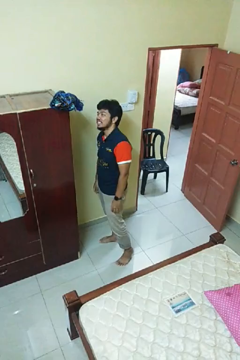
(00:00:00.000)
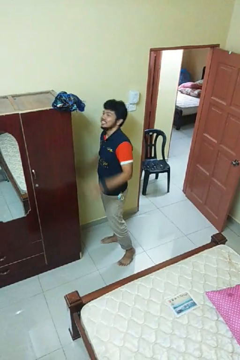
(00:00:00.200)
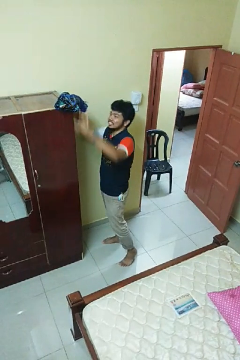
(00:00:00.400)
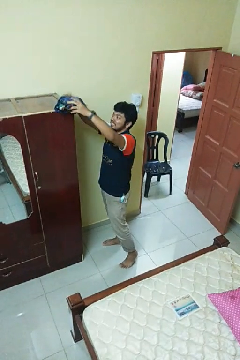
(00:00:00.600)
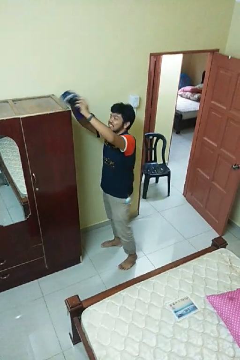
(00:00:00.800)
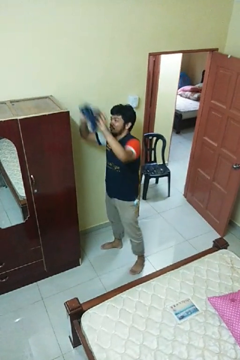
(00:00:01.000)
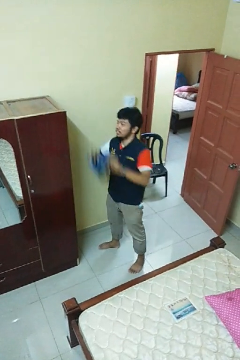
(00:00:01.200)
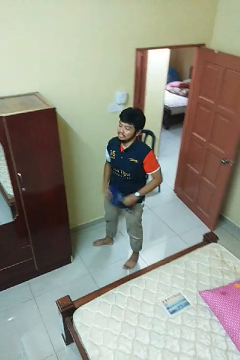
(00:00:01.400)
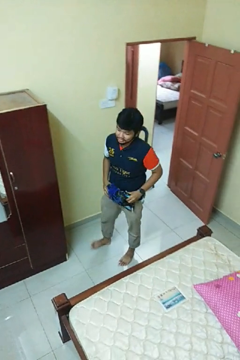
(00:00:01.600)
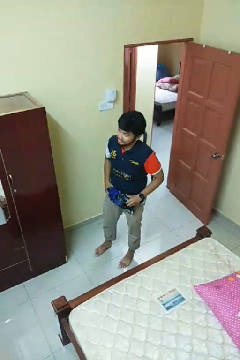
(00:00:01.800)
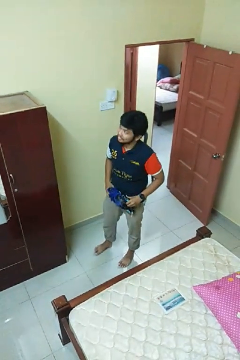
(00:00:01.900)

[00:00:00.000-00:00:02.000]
person picks up object from countertop

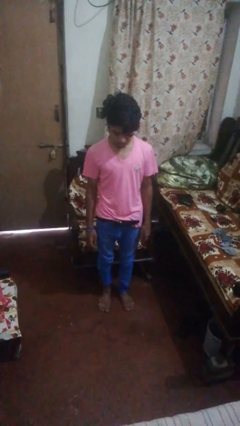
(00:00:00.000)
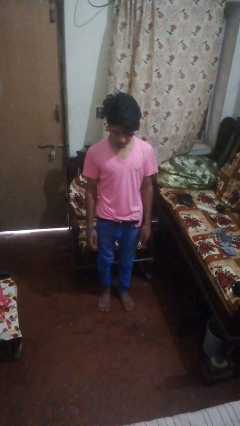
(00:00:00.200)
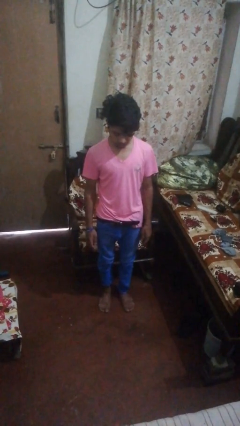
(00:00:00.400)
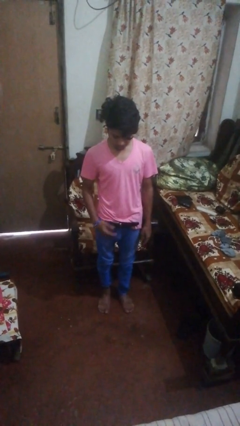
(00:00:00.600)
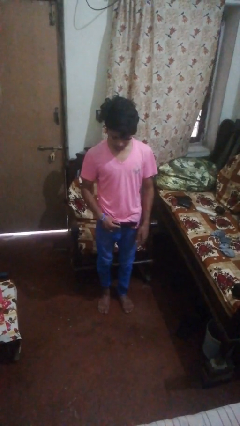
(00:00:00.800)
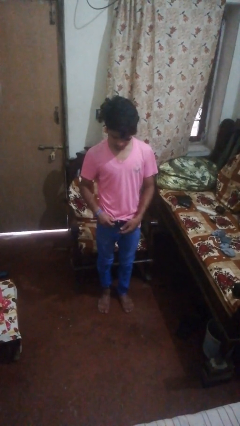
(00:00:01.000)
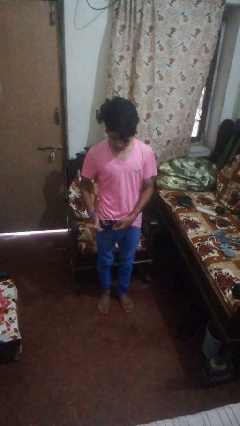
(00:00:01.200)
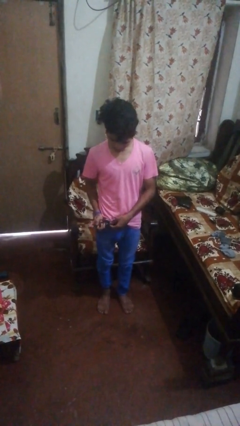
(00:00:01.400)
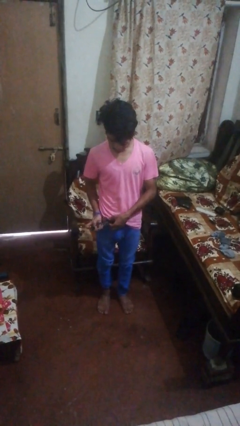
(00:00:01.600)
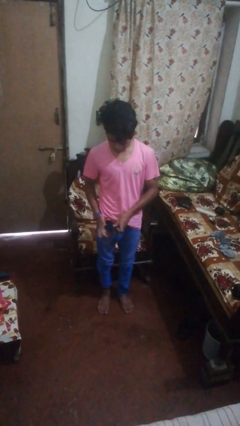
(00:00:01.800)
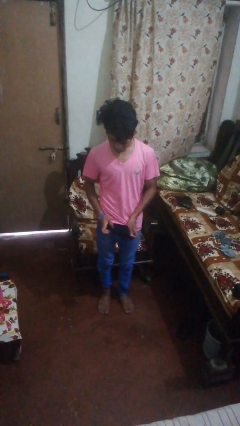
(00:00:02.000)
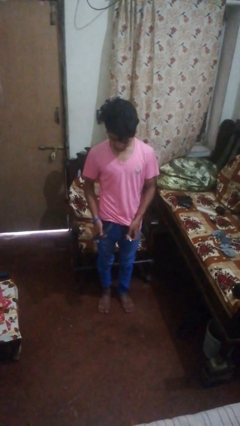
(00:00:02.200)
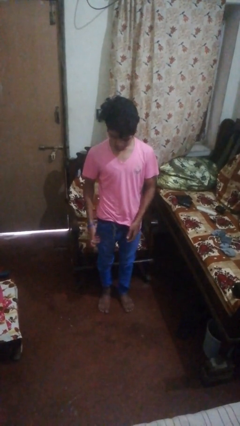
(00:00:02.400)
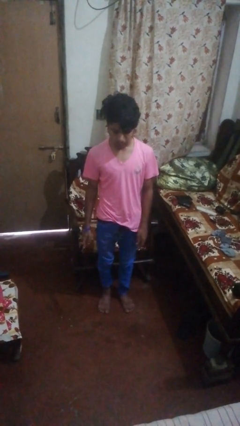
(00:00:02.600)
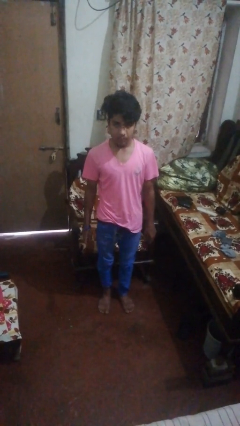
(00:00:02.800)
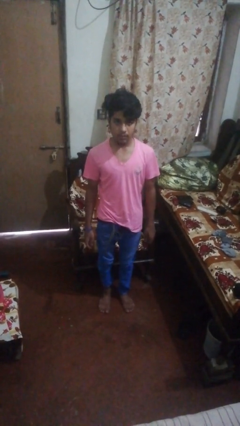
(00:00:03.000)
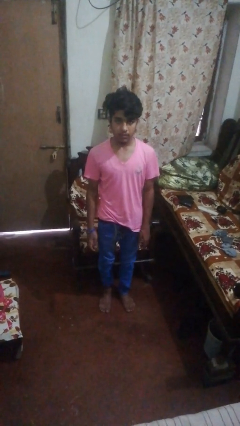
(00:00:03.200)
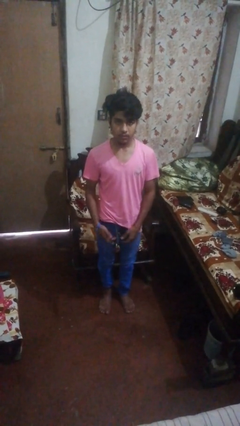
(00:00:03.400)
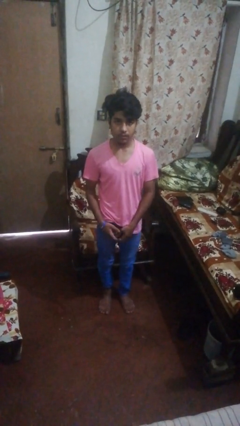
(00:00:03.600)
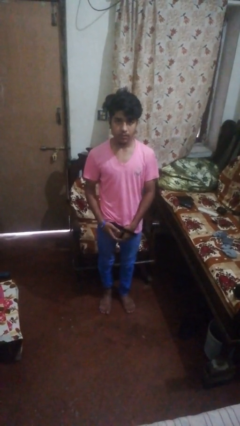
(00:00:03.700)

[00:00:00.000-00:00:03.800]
person takes off belt

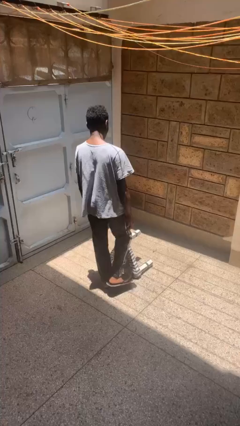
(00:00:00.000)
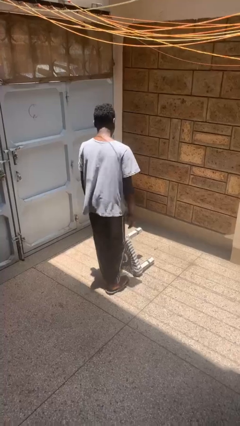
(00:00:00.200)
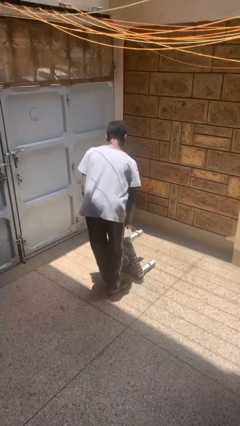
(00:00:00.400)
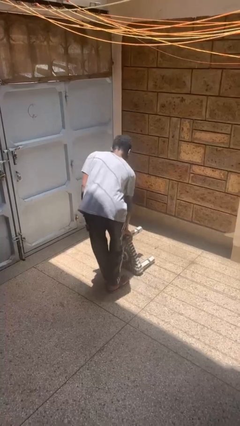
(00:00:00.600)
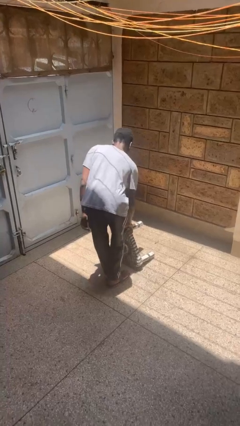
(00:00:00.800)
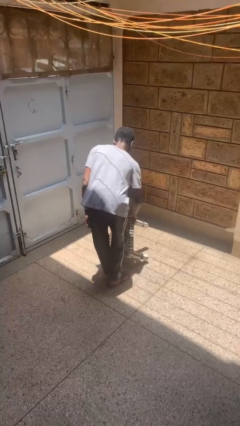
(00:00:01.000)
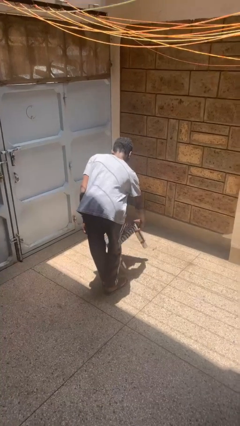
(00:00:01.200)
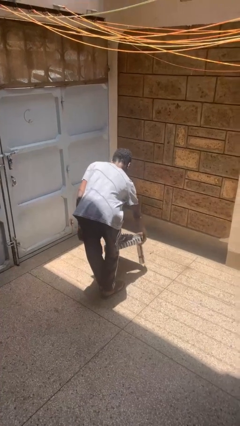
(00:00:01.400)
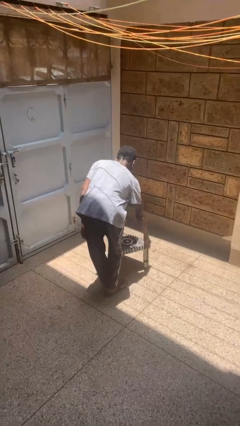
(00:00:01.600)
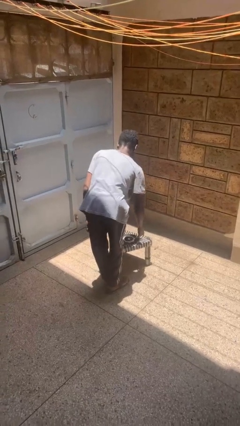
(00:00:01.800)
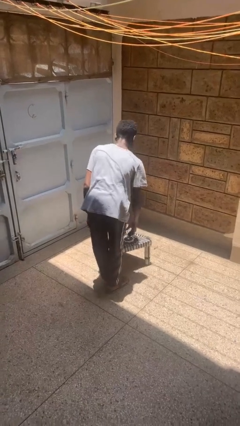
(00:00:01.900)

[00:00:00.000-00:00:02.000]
person sets upright furniture

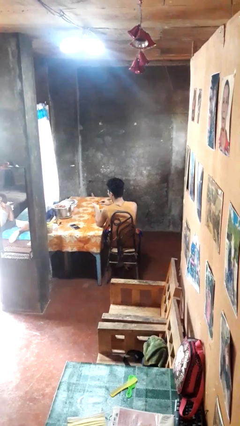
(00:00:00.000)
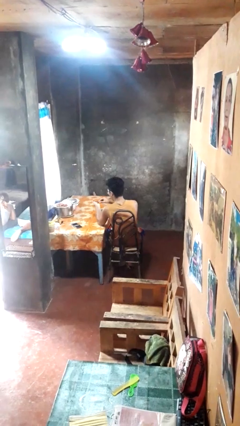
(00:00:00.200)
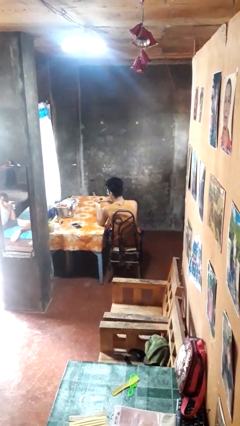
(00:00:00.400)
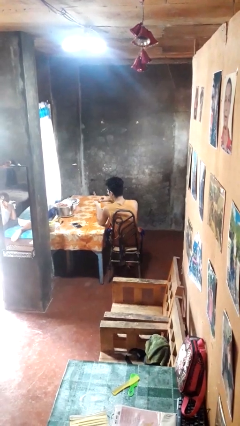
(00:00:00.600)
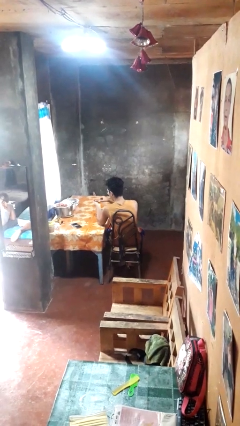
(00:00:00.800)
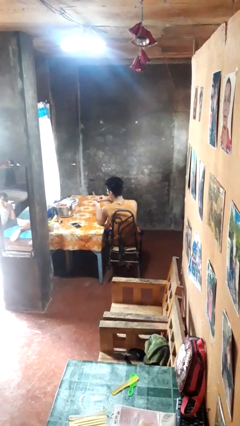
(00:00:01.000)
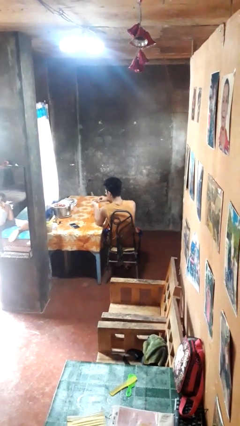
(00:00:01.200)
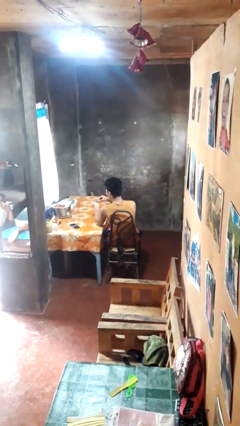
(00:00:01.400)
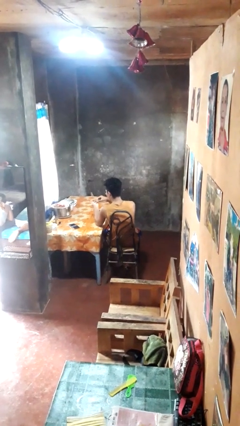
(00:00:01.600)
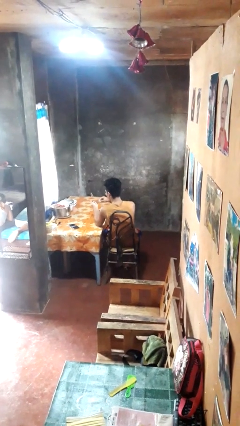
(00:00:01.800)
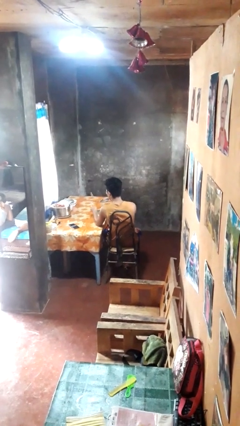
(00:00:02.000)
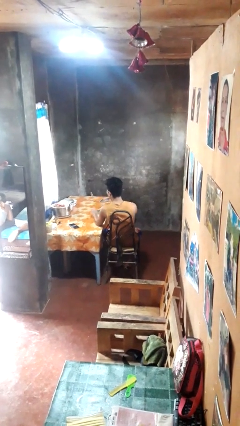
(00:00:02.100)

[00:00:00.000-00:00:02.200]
person files fingernails

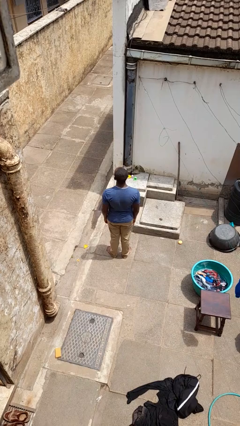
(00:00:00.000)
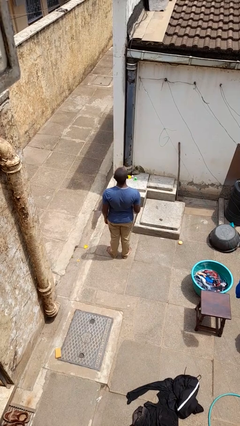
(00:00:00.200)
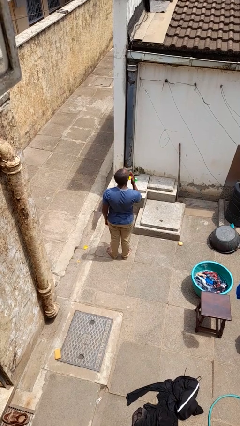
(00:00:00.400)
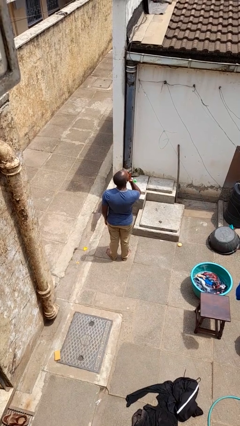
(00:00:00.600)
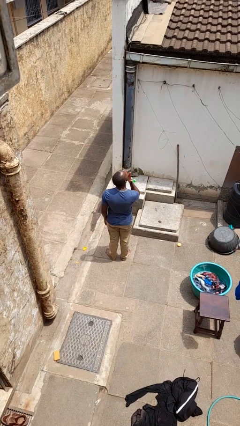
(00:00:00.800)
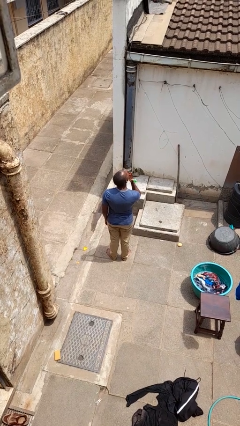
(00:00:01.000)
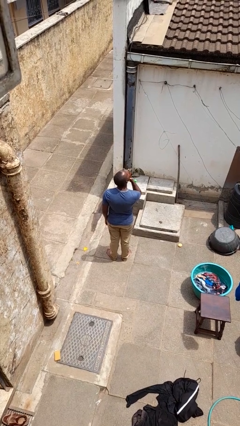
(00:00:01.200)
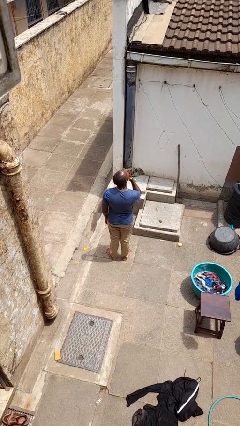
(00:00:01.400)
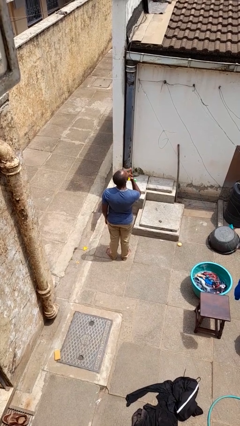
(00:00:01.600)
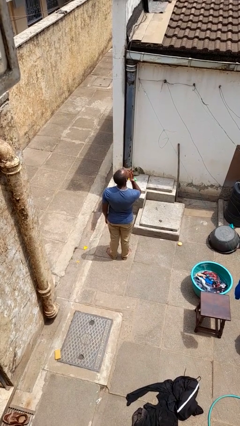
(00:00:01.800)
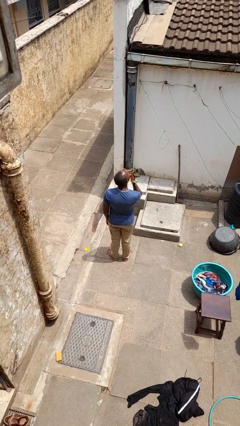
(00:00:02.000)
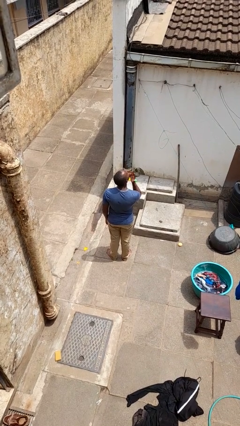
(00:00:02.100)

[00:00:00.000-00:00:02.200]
person licks fingers

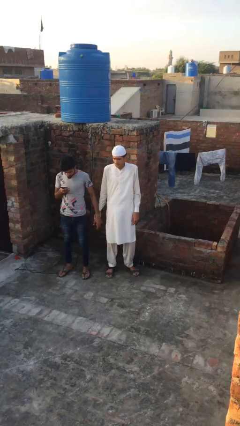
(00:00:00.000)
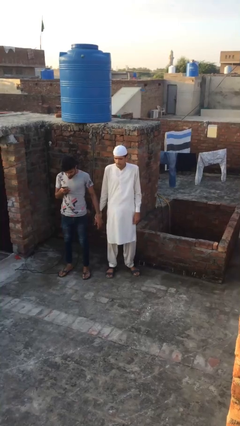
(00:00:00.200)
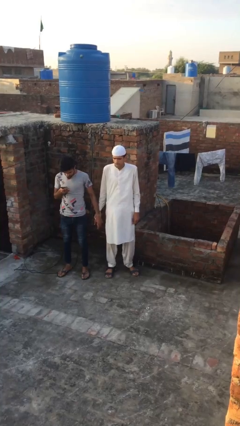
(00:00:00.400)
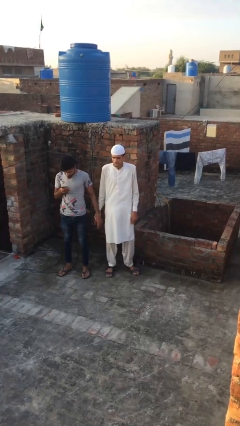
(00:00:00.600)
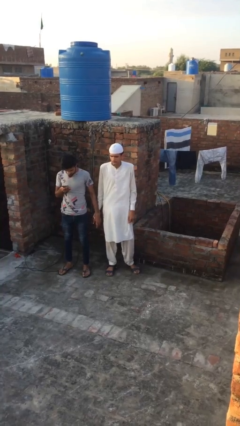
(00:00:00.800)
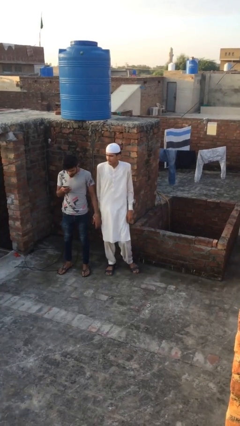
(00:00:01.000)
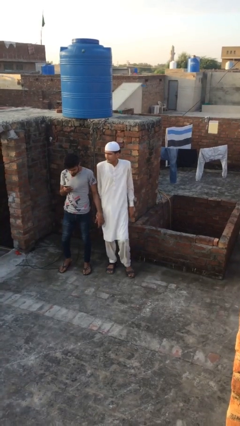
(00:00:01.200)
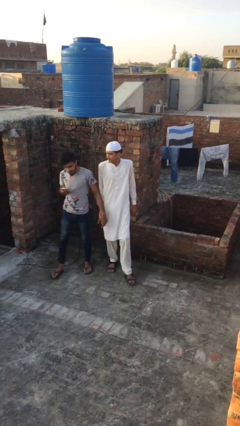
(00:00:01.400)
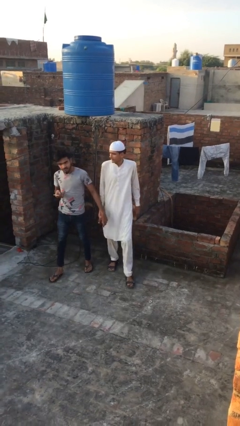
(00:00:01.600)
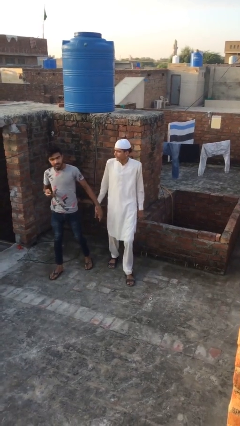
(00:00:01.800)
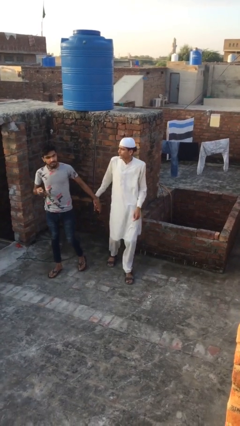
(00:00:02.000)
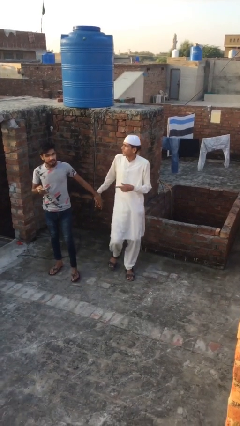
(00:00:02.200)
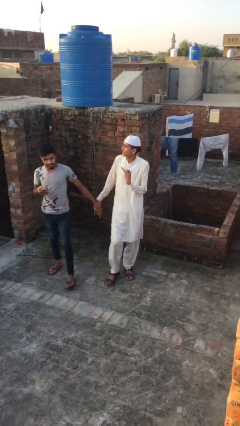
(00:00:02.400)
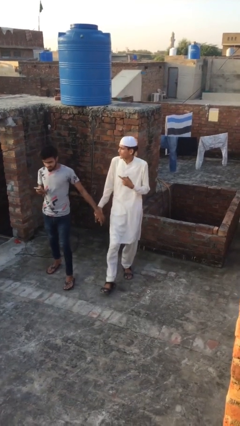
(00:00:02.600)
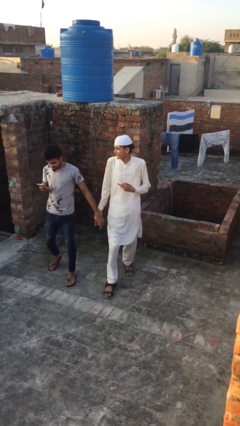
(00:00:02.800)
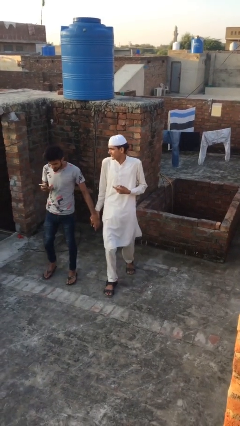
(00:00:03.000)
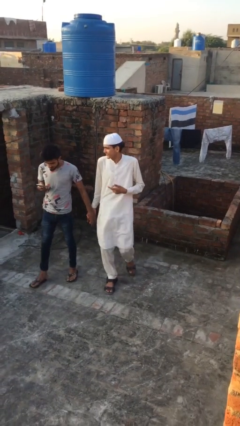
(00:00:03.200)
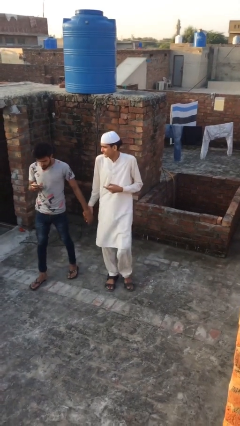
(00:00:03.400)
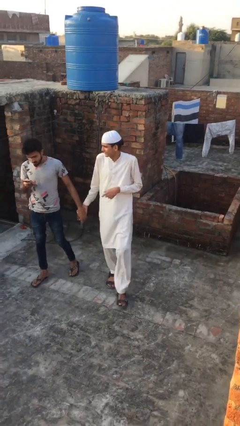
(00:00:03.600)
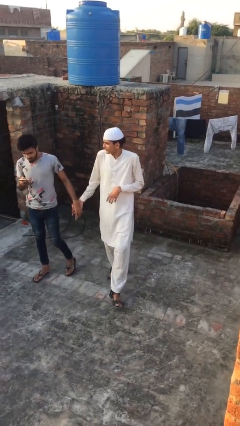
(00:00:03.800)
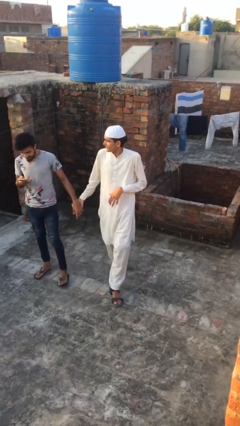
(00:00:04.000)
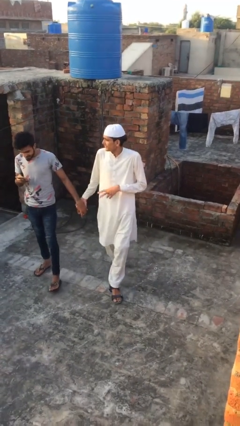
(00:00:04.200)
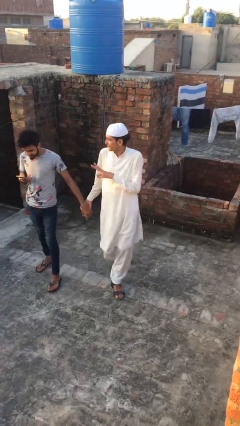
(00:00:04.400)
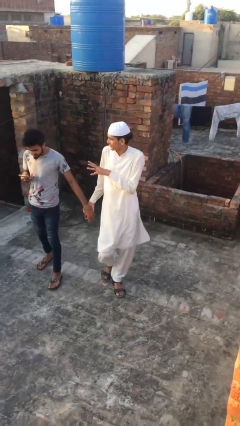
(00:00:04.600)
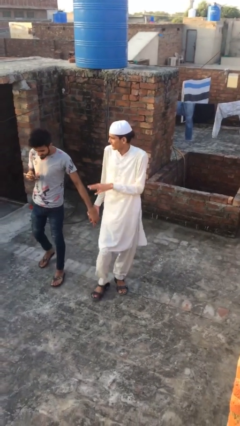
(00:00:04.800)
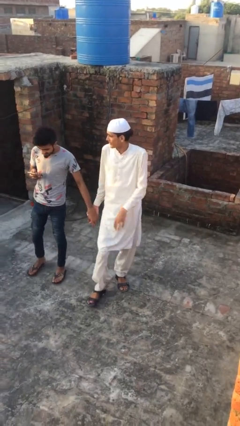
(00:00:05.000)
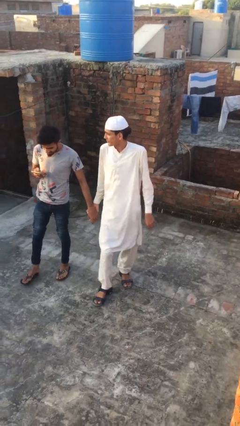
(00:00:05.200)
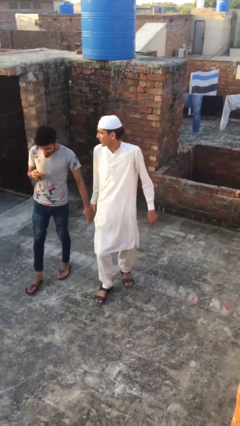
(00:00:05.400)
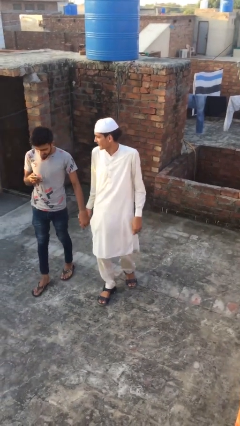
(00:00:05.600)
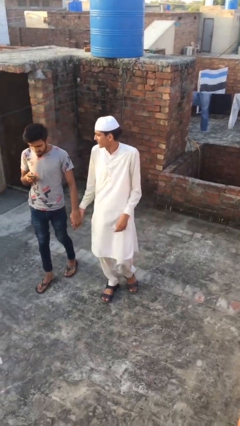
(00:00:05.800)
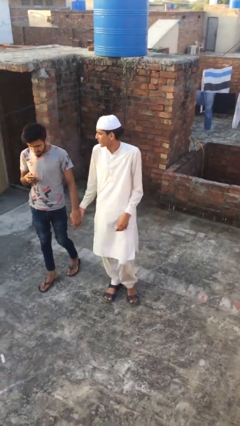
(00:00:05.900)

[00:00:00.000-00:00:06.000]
person holds hand
